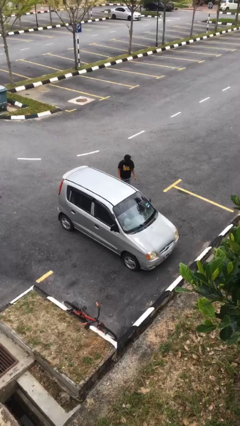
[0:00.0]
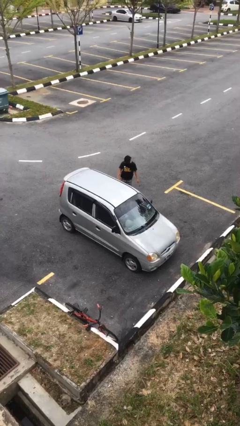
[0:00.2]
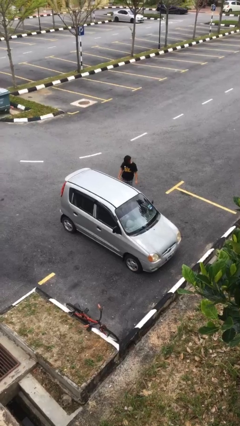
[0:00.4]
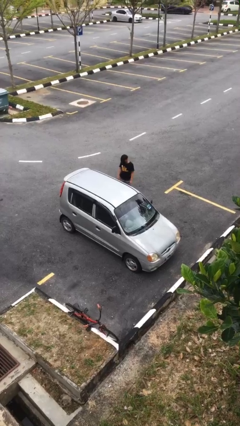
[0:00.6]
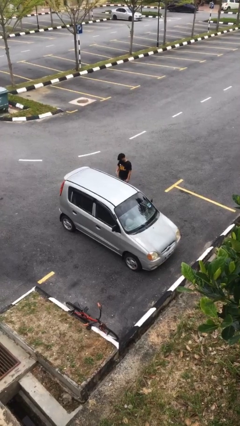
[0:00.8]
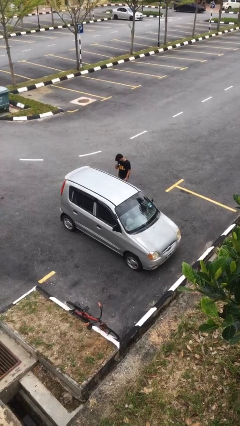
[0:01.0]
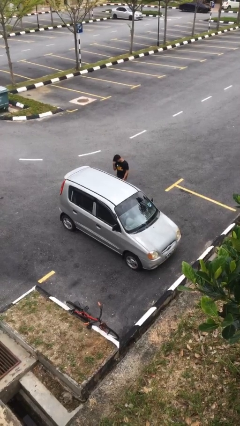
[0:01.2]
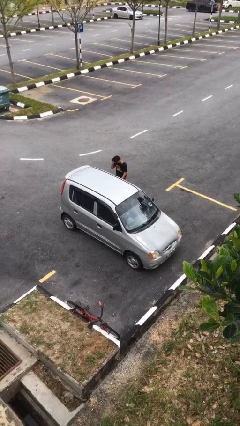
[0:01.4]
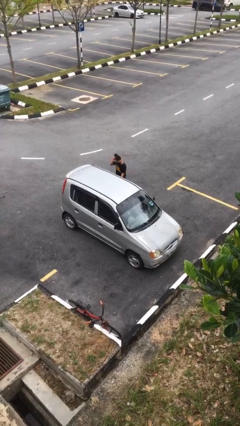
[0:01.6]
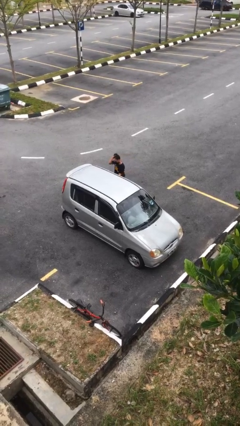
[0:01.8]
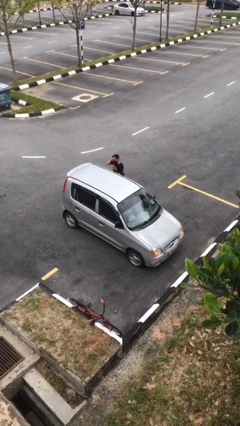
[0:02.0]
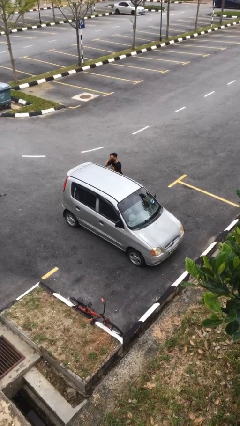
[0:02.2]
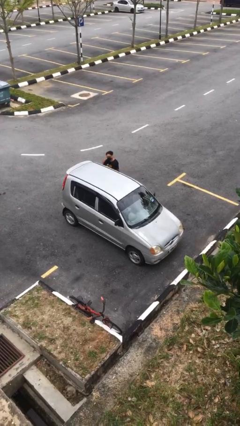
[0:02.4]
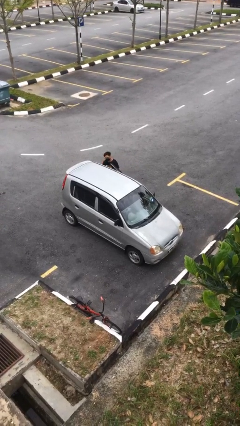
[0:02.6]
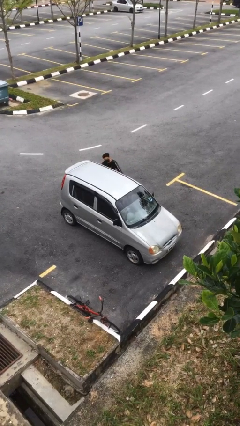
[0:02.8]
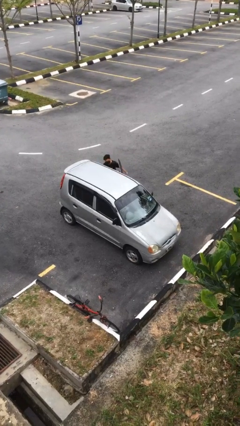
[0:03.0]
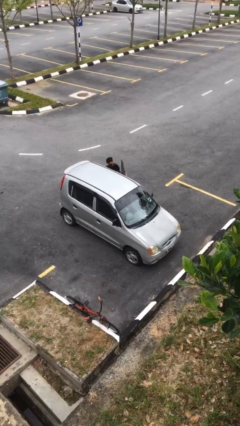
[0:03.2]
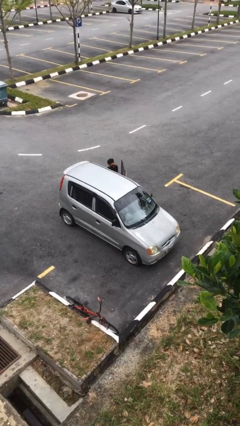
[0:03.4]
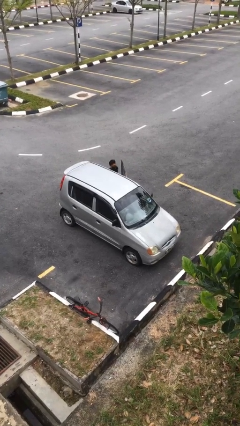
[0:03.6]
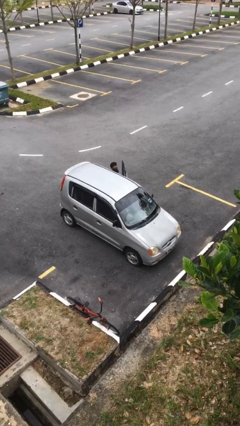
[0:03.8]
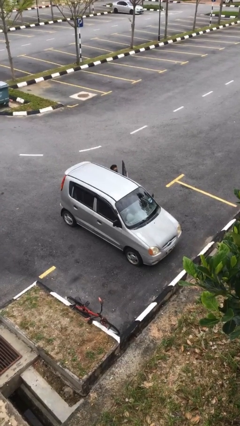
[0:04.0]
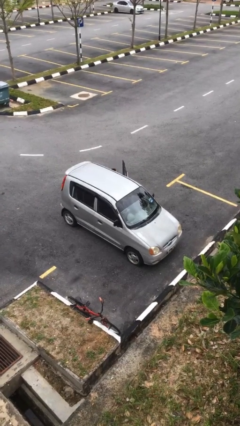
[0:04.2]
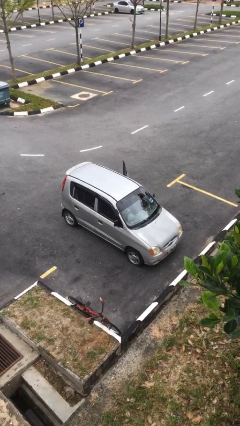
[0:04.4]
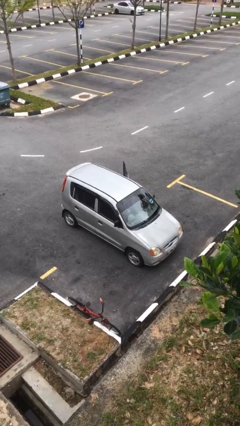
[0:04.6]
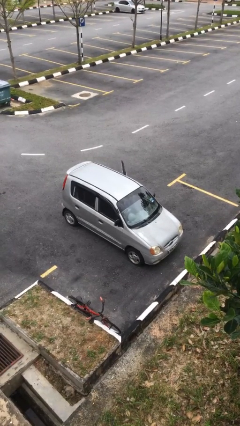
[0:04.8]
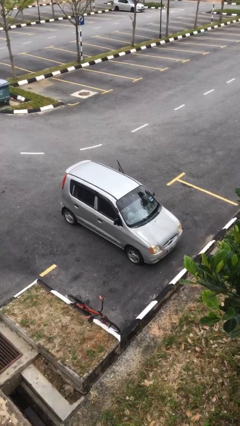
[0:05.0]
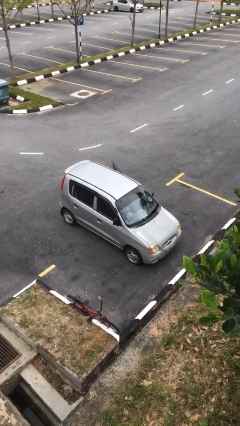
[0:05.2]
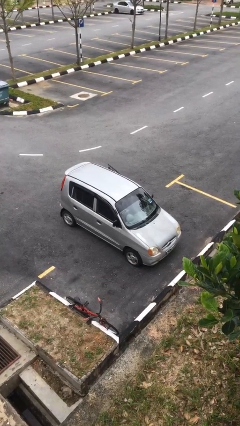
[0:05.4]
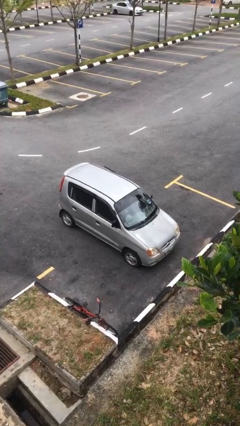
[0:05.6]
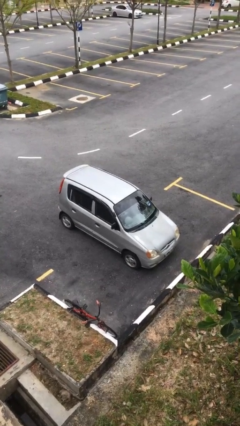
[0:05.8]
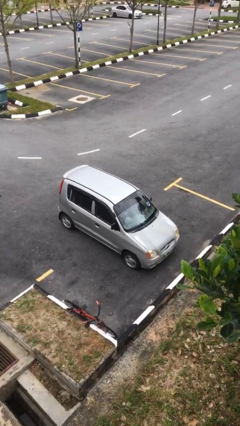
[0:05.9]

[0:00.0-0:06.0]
car picks up person

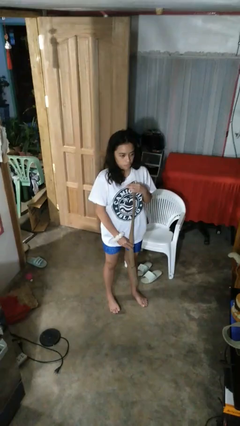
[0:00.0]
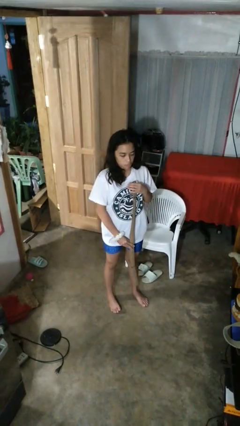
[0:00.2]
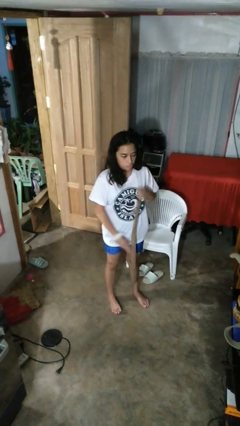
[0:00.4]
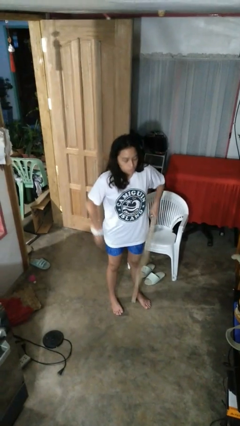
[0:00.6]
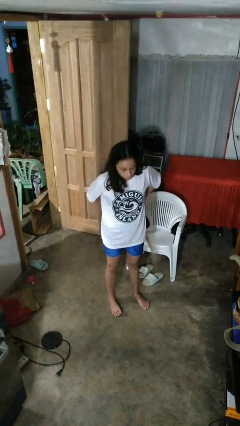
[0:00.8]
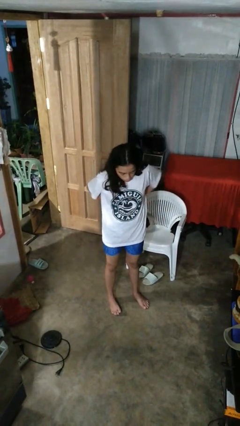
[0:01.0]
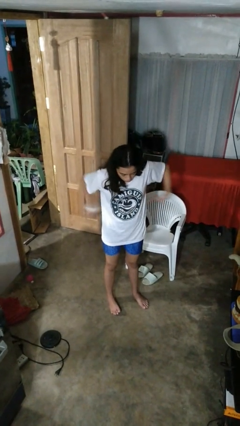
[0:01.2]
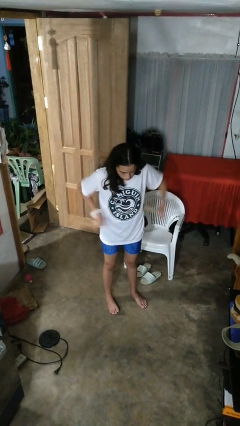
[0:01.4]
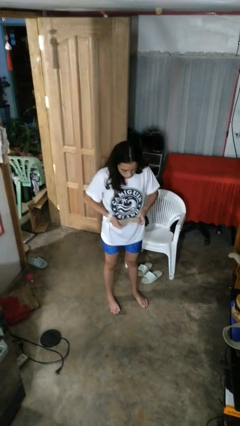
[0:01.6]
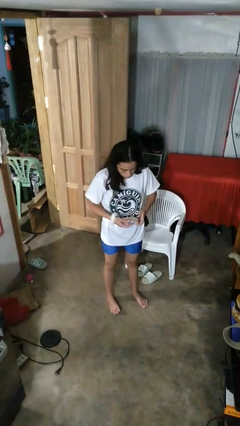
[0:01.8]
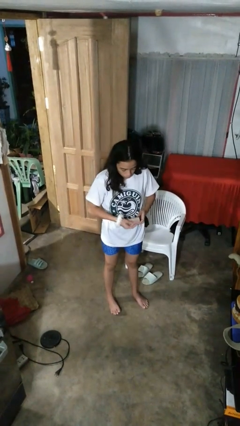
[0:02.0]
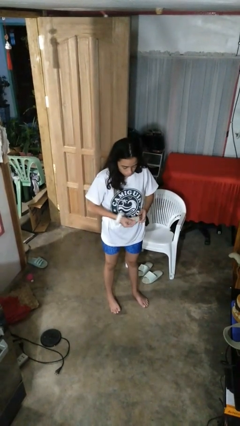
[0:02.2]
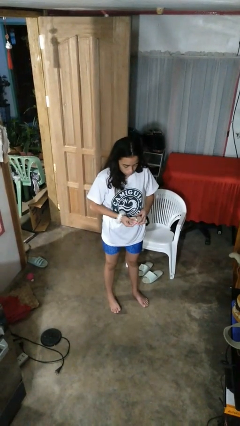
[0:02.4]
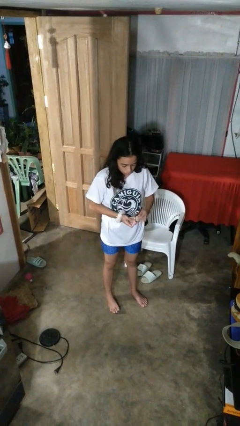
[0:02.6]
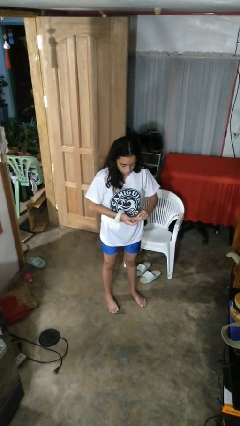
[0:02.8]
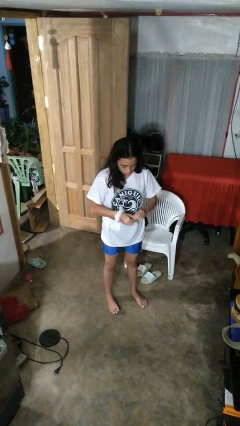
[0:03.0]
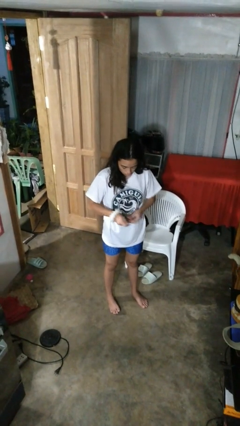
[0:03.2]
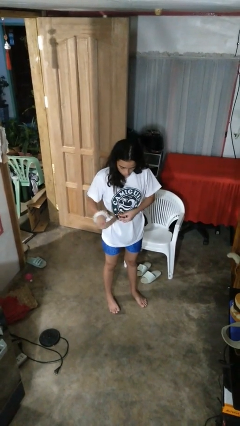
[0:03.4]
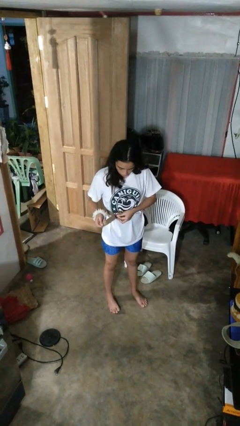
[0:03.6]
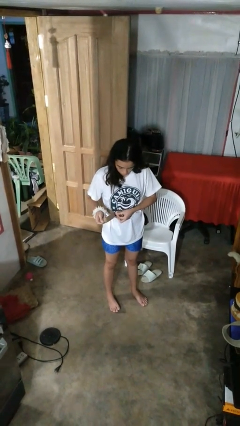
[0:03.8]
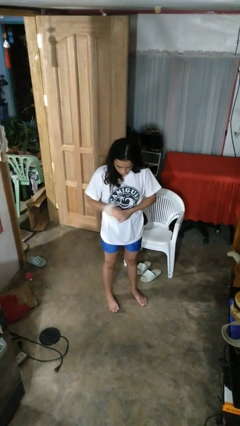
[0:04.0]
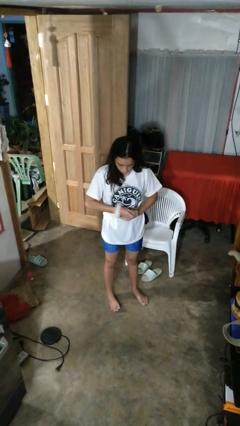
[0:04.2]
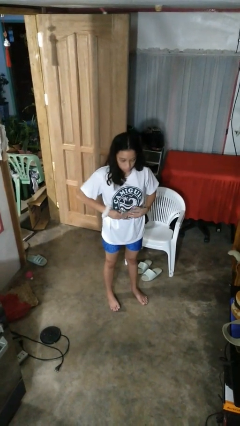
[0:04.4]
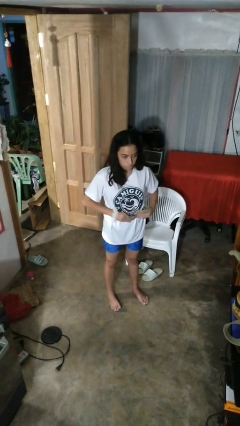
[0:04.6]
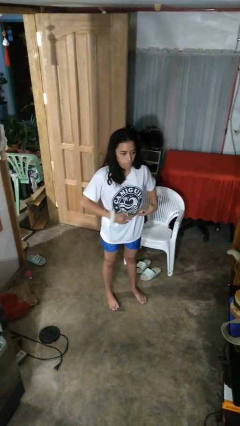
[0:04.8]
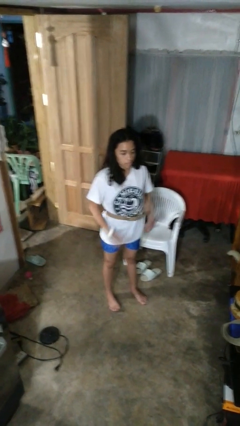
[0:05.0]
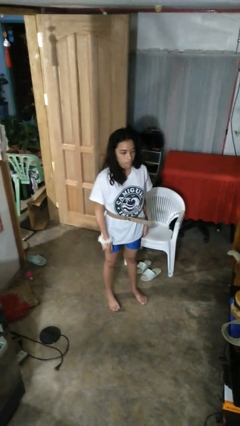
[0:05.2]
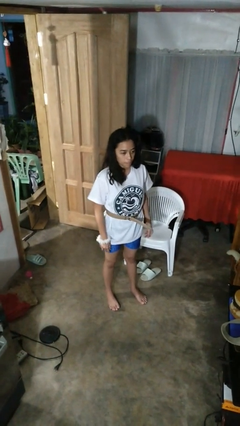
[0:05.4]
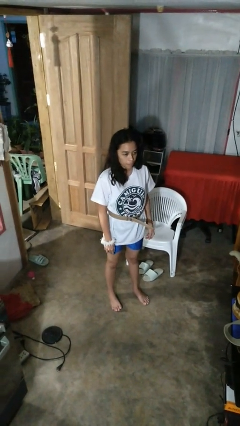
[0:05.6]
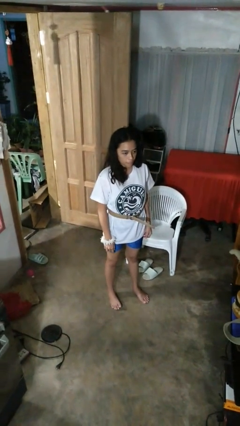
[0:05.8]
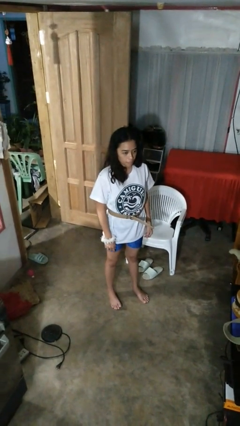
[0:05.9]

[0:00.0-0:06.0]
person puts on belt

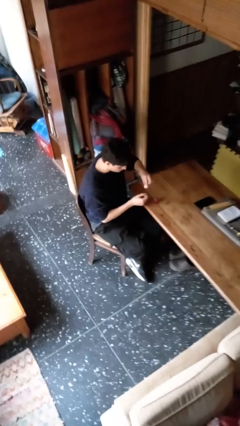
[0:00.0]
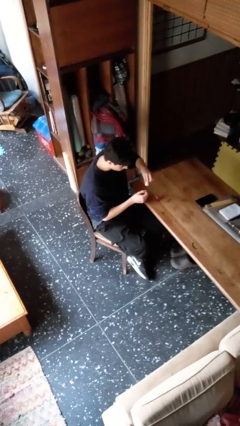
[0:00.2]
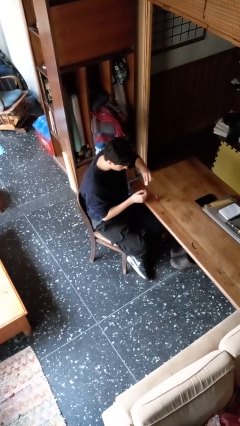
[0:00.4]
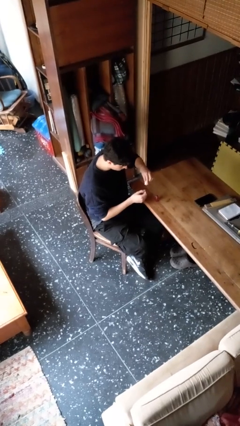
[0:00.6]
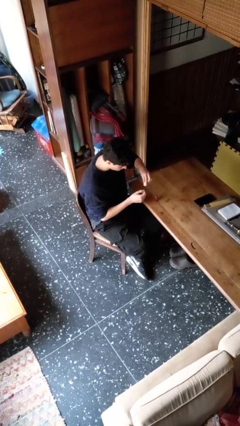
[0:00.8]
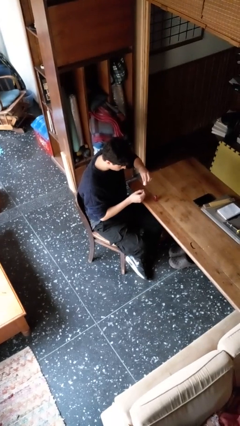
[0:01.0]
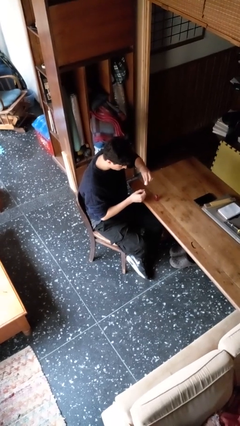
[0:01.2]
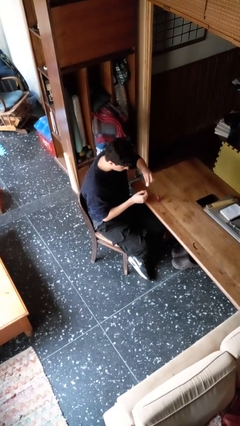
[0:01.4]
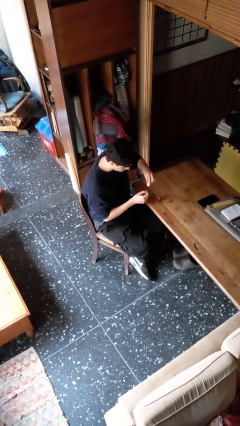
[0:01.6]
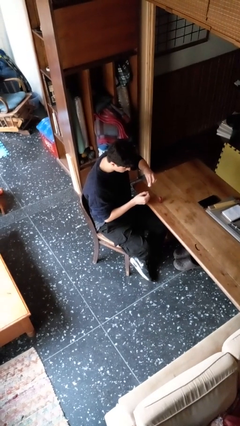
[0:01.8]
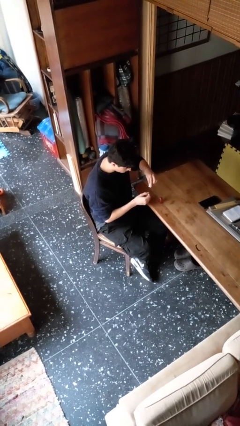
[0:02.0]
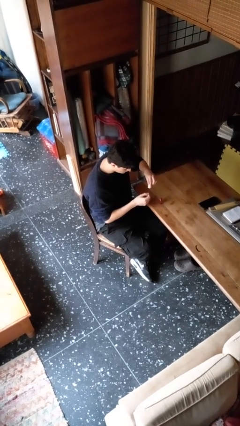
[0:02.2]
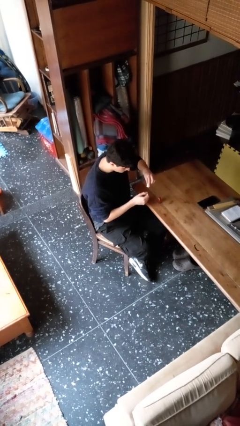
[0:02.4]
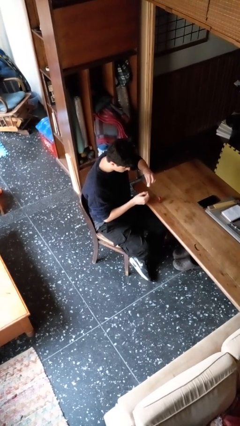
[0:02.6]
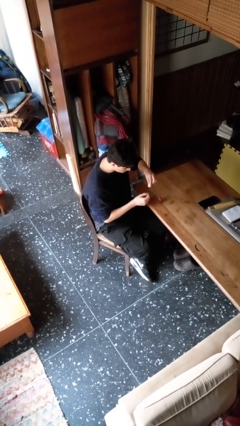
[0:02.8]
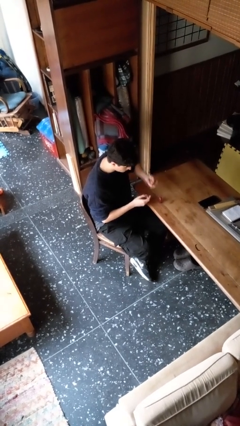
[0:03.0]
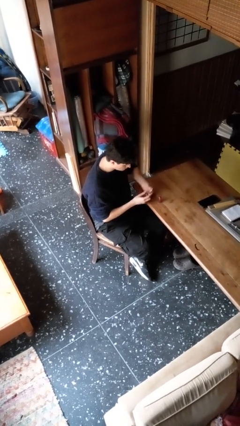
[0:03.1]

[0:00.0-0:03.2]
person paints fingernails

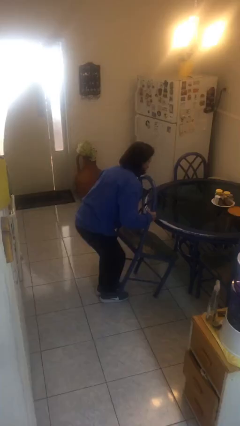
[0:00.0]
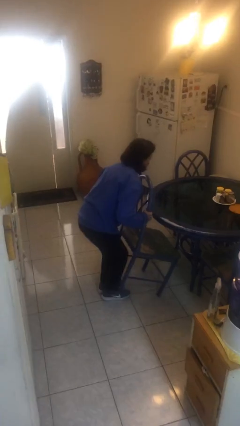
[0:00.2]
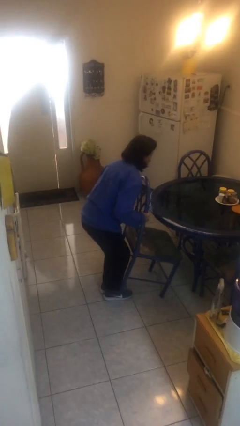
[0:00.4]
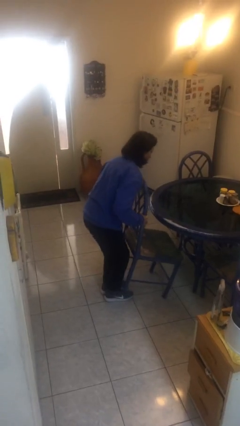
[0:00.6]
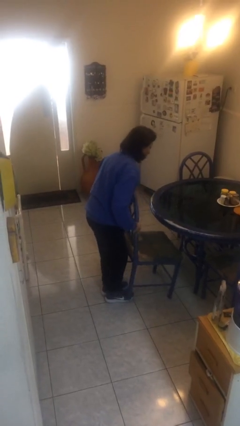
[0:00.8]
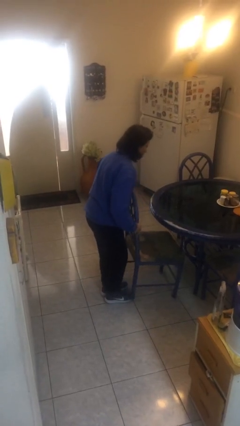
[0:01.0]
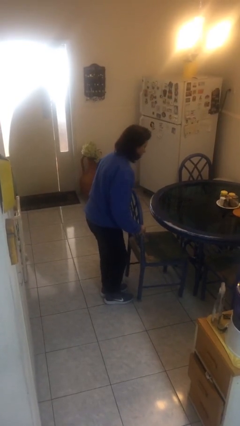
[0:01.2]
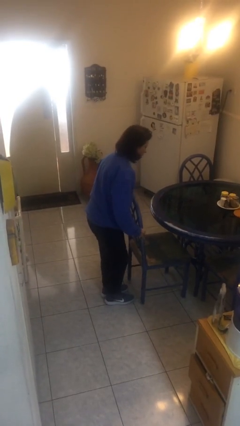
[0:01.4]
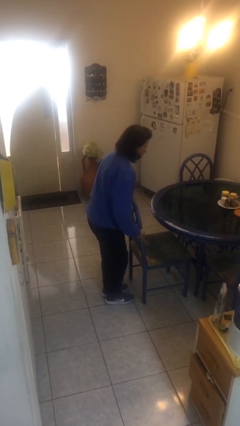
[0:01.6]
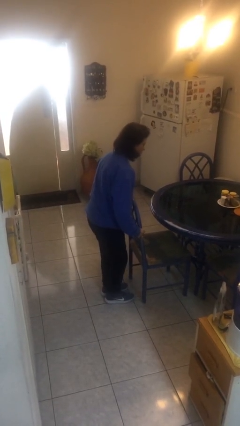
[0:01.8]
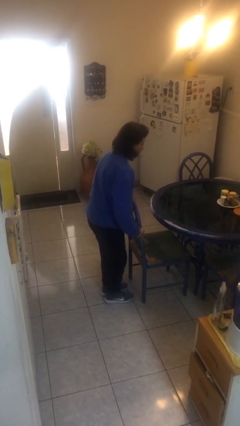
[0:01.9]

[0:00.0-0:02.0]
person puts down object on floor

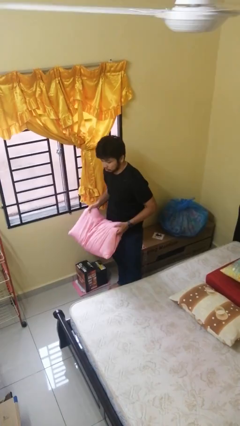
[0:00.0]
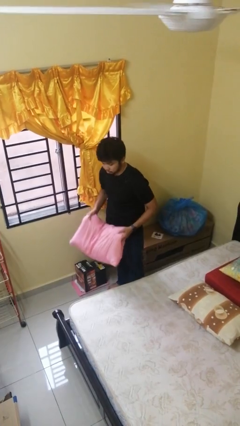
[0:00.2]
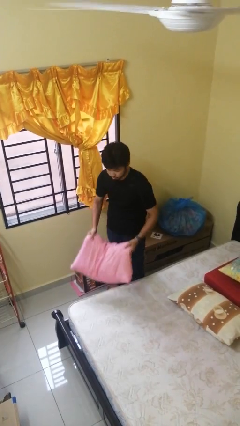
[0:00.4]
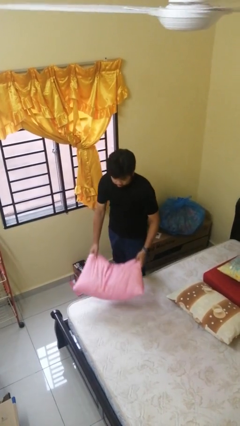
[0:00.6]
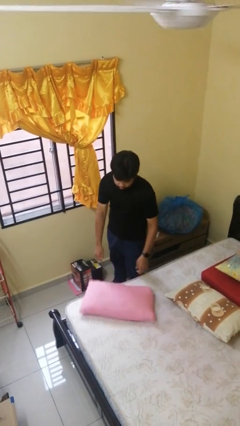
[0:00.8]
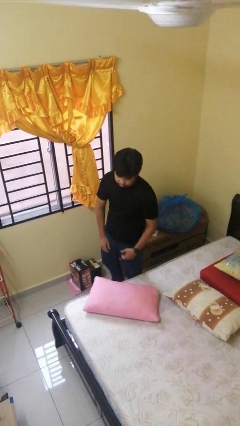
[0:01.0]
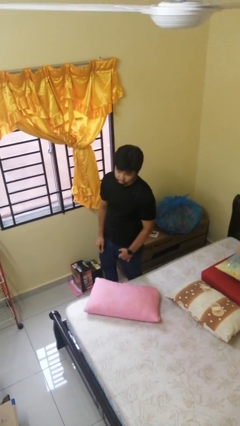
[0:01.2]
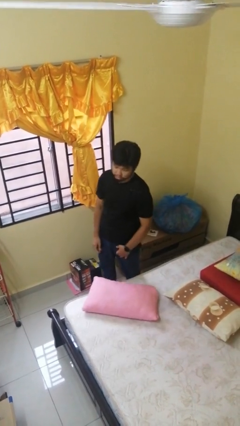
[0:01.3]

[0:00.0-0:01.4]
person puts down object on bed
